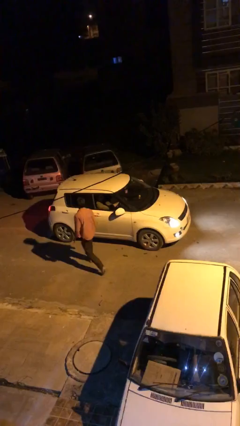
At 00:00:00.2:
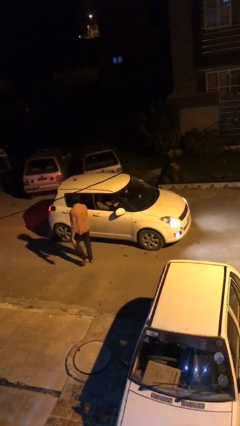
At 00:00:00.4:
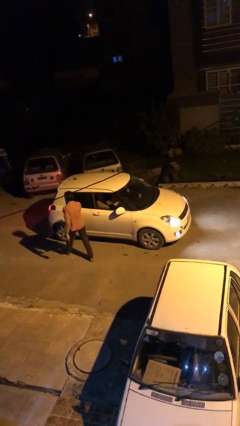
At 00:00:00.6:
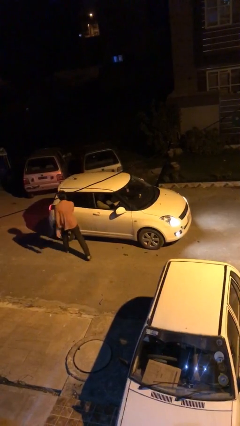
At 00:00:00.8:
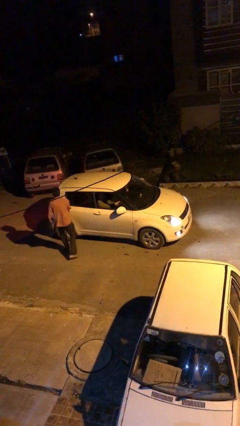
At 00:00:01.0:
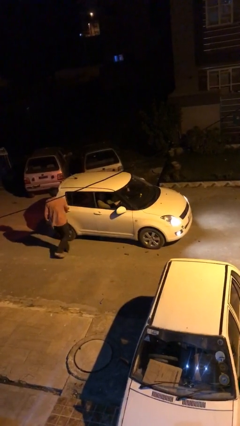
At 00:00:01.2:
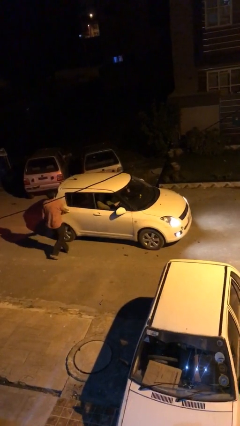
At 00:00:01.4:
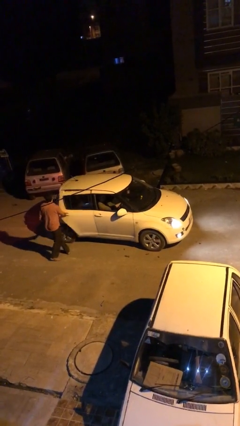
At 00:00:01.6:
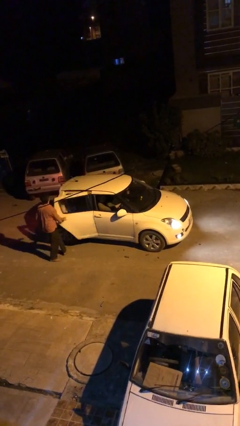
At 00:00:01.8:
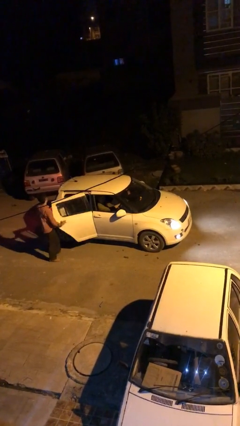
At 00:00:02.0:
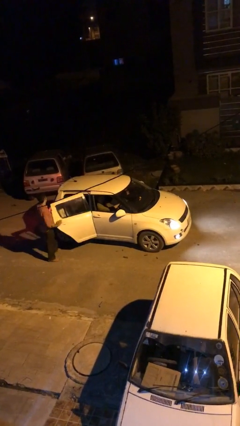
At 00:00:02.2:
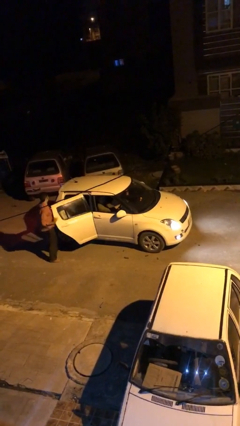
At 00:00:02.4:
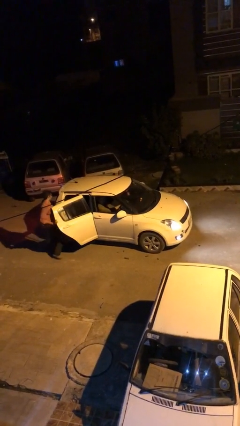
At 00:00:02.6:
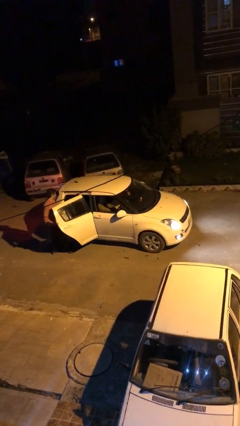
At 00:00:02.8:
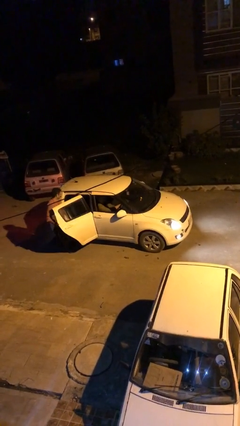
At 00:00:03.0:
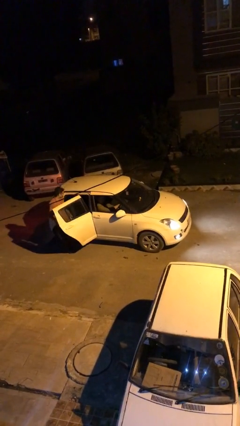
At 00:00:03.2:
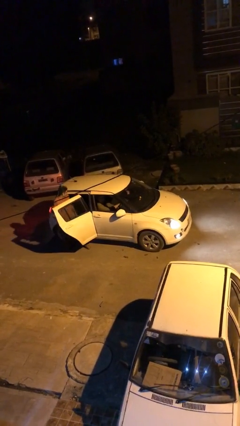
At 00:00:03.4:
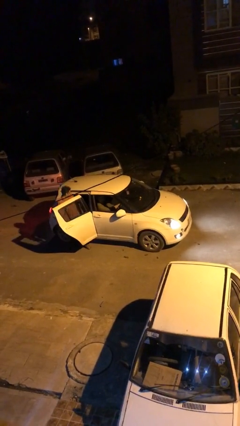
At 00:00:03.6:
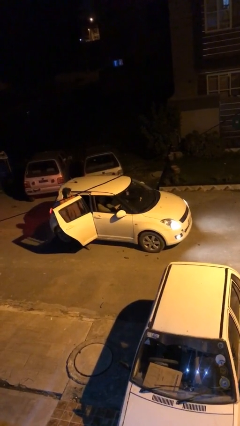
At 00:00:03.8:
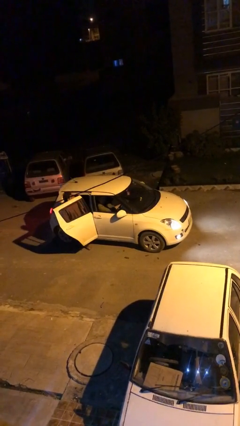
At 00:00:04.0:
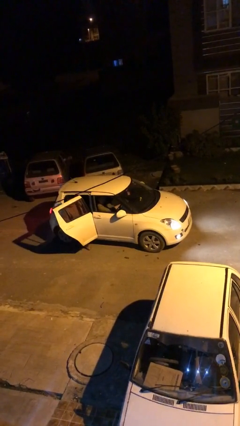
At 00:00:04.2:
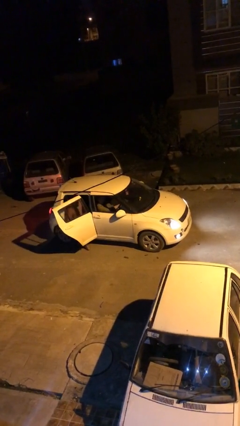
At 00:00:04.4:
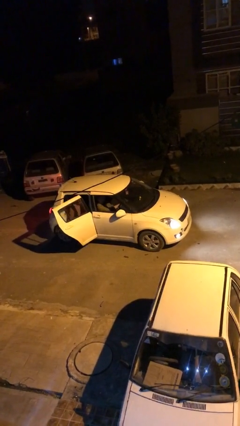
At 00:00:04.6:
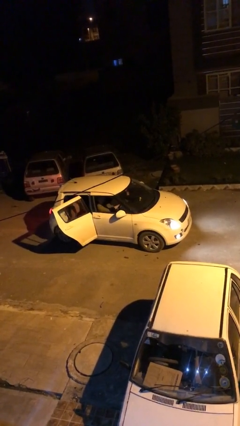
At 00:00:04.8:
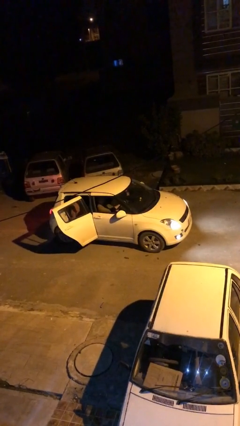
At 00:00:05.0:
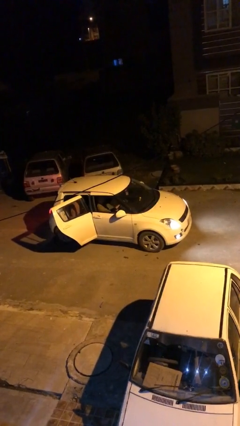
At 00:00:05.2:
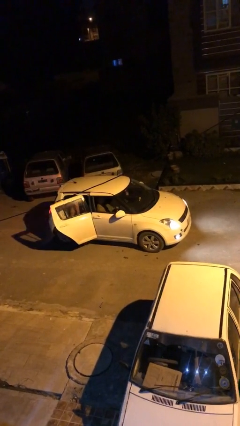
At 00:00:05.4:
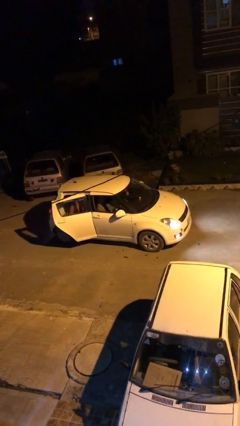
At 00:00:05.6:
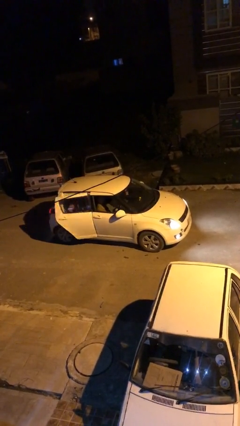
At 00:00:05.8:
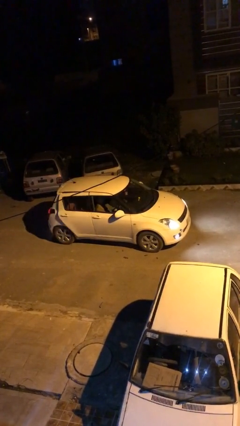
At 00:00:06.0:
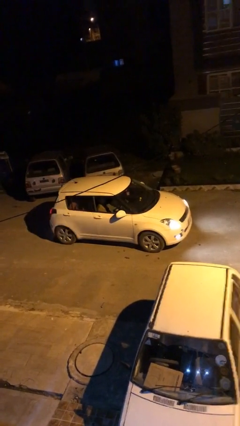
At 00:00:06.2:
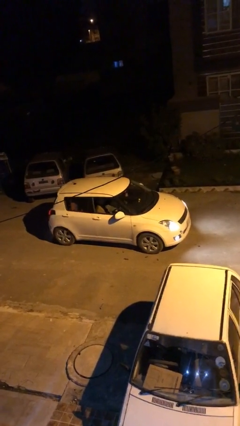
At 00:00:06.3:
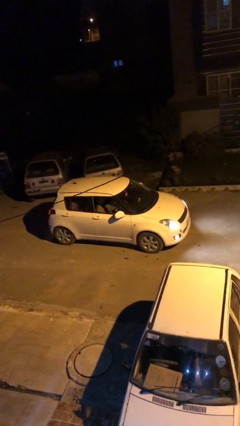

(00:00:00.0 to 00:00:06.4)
car picks up person

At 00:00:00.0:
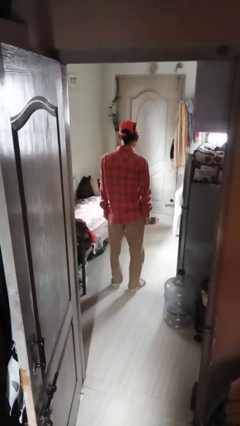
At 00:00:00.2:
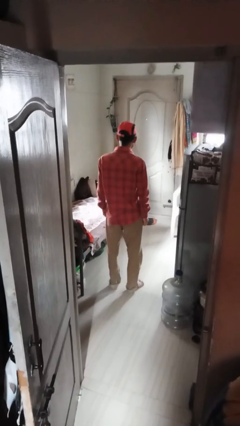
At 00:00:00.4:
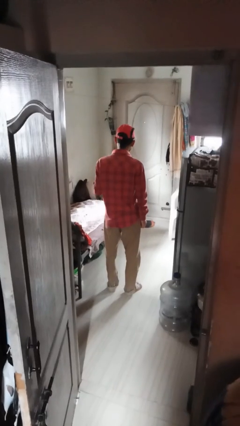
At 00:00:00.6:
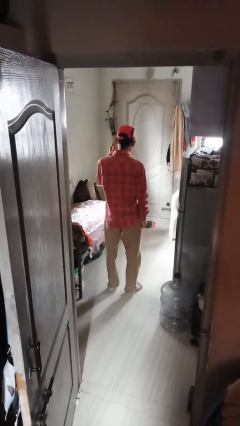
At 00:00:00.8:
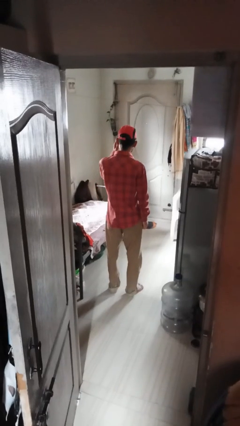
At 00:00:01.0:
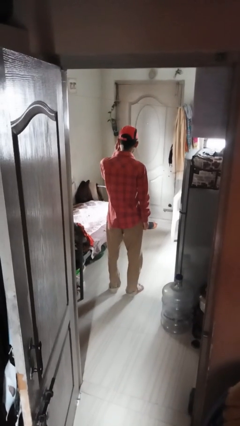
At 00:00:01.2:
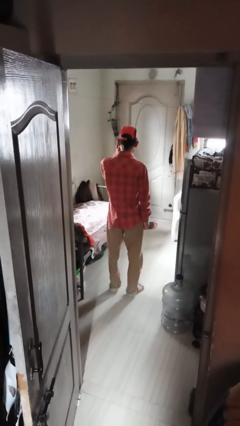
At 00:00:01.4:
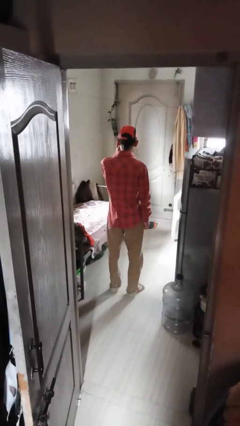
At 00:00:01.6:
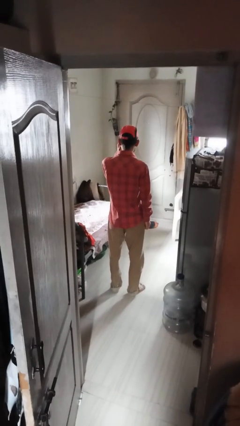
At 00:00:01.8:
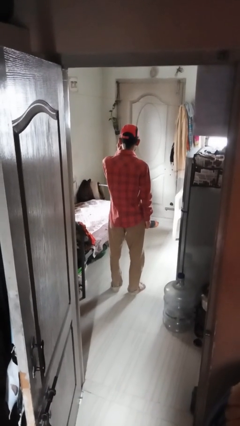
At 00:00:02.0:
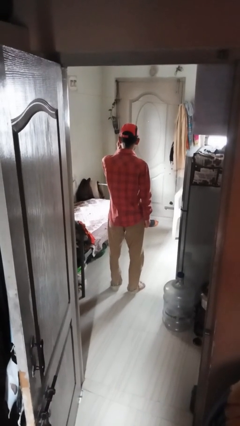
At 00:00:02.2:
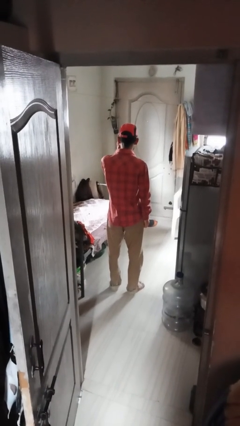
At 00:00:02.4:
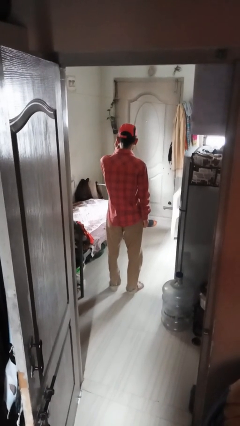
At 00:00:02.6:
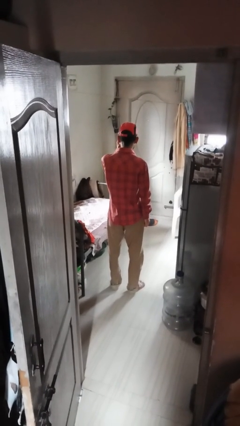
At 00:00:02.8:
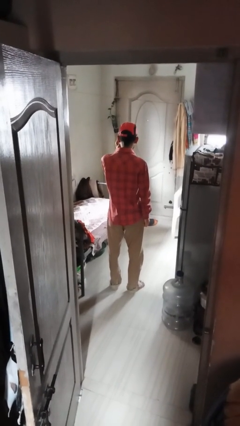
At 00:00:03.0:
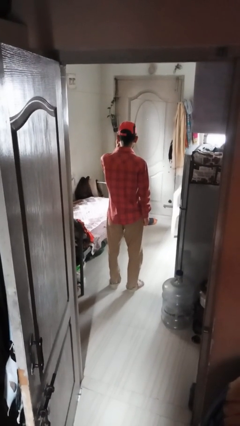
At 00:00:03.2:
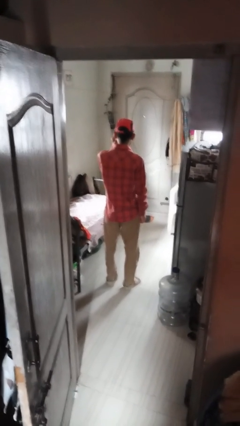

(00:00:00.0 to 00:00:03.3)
person scratches face

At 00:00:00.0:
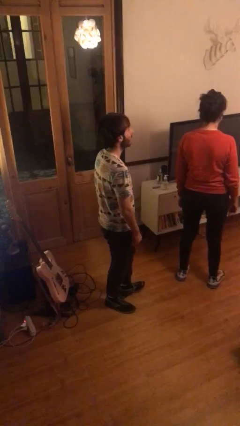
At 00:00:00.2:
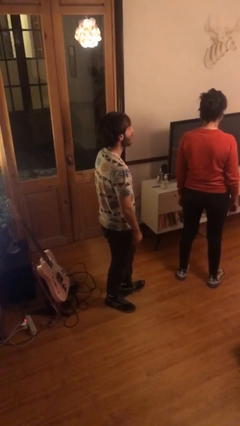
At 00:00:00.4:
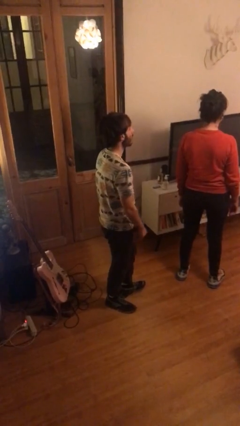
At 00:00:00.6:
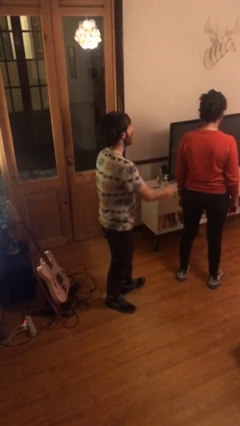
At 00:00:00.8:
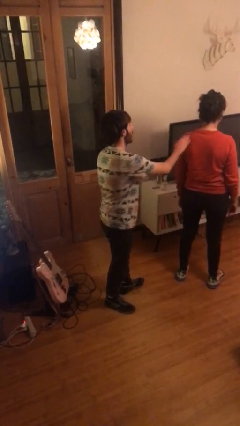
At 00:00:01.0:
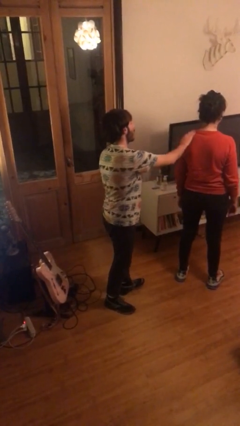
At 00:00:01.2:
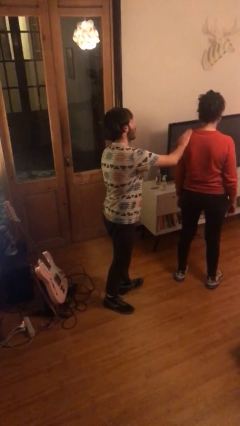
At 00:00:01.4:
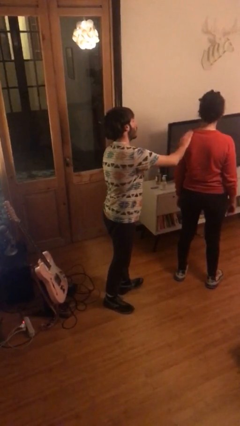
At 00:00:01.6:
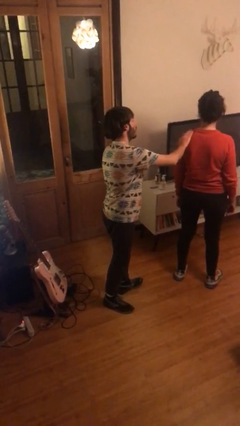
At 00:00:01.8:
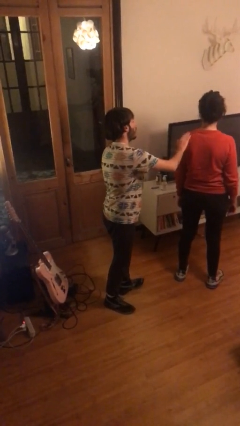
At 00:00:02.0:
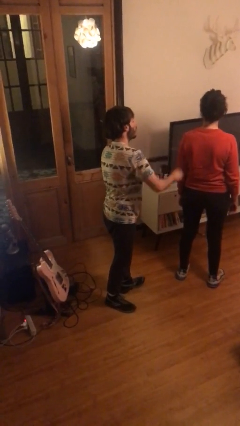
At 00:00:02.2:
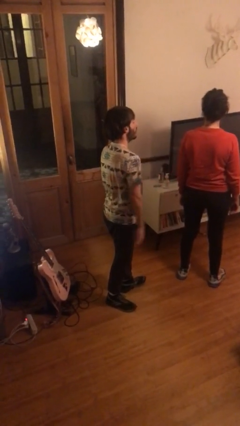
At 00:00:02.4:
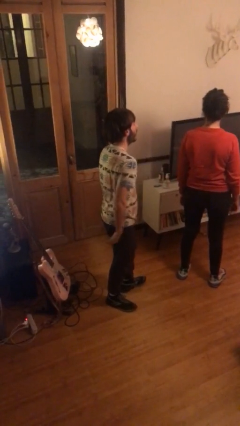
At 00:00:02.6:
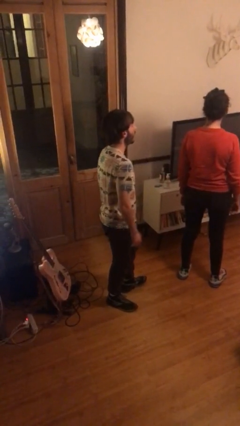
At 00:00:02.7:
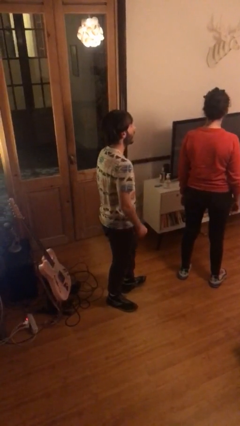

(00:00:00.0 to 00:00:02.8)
person touches back of person

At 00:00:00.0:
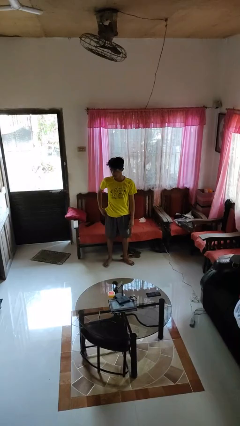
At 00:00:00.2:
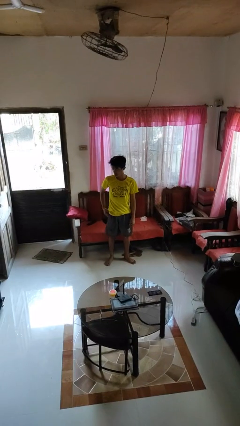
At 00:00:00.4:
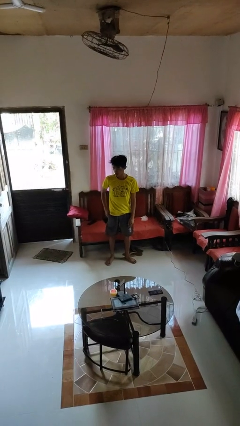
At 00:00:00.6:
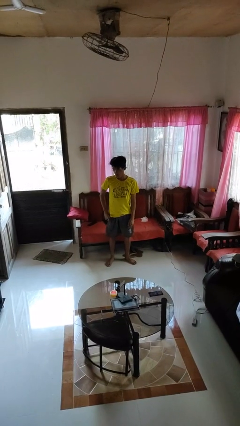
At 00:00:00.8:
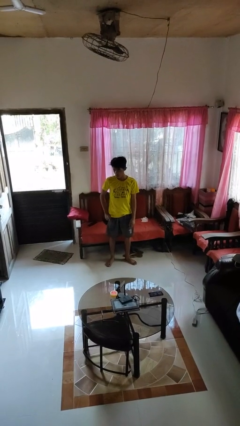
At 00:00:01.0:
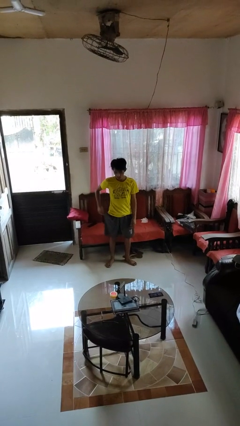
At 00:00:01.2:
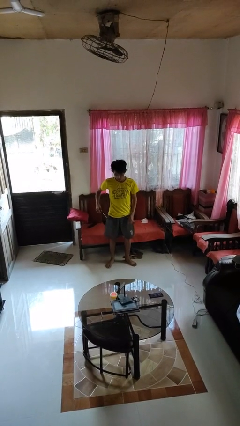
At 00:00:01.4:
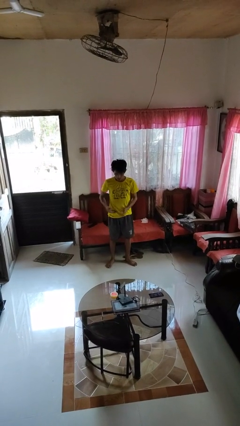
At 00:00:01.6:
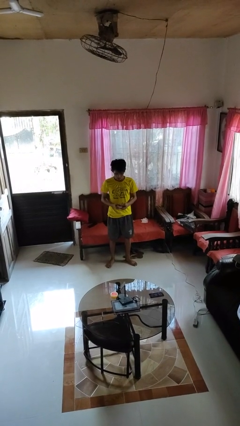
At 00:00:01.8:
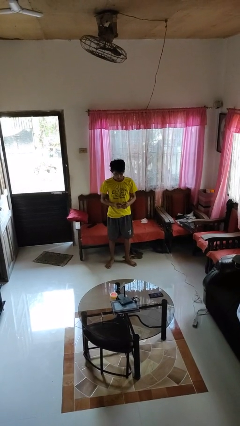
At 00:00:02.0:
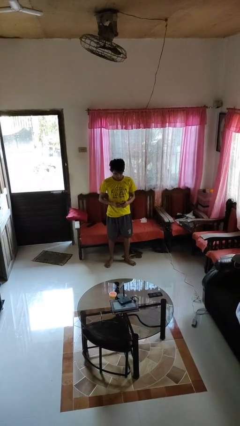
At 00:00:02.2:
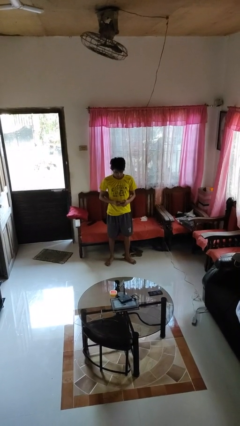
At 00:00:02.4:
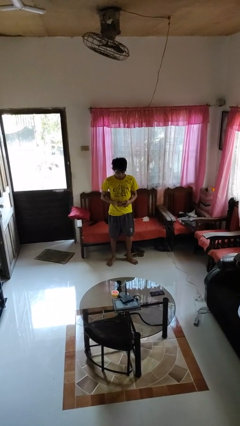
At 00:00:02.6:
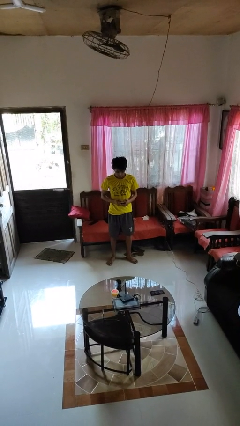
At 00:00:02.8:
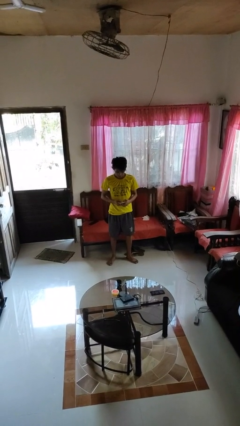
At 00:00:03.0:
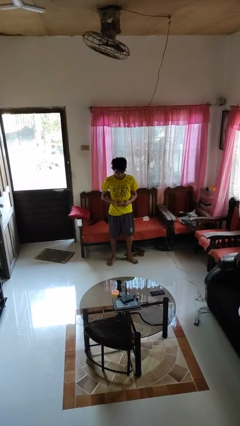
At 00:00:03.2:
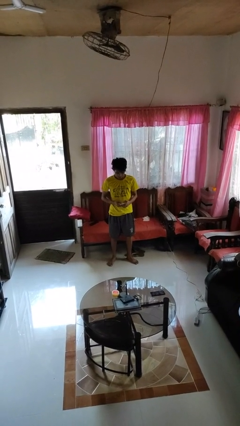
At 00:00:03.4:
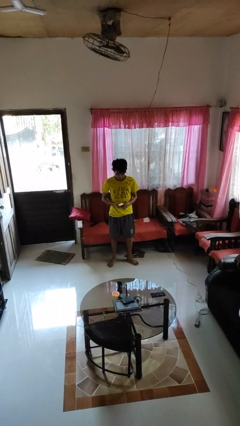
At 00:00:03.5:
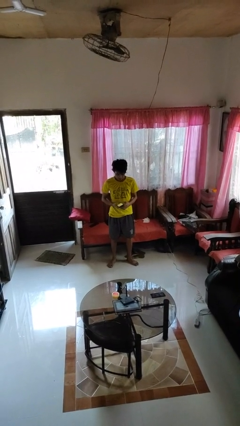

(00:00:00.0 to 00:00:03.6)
person takes phone from pocket

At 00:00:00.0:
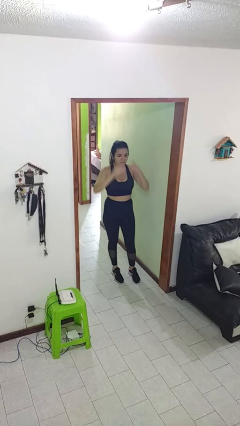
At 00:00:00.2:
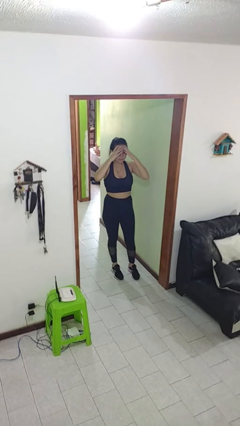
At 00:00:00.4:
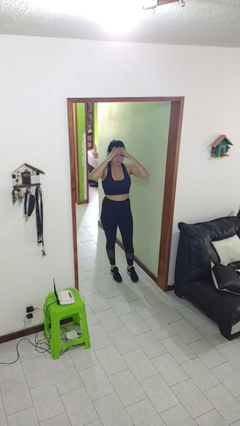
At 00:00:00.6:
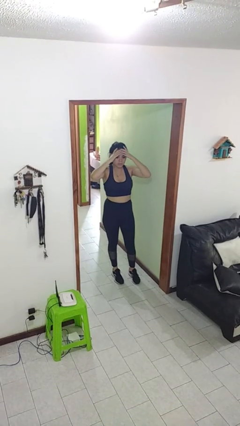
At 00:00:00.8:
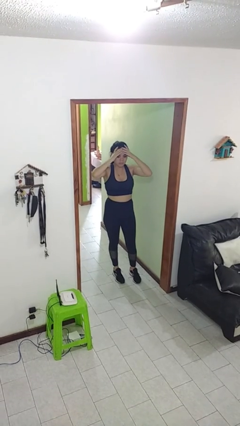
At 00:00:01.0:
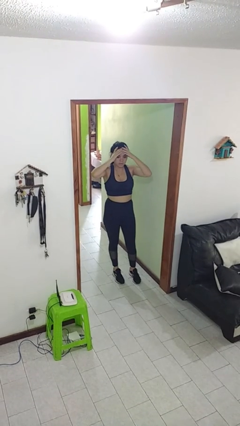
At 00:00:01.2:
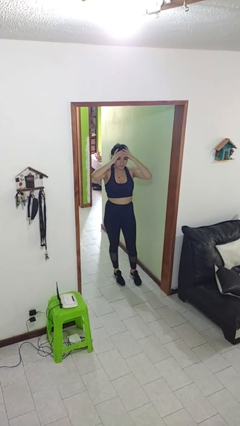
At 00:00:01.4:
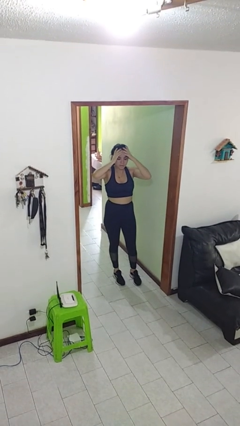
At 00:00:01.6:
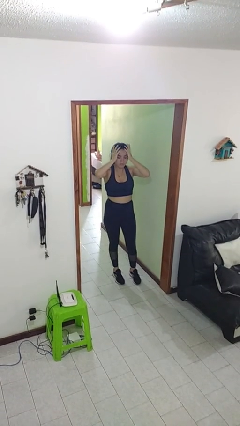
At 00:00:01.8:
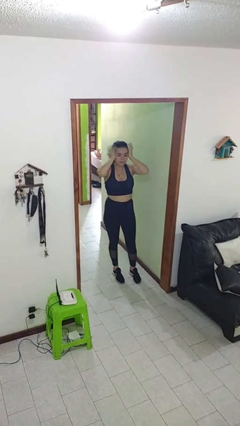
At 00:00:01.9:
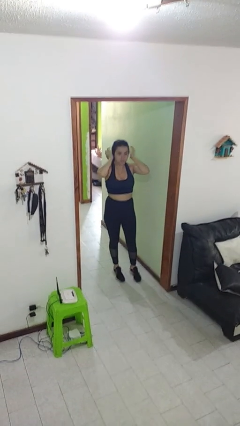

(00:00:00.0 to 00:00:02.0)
person covers face with hands
